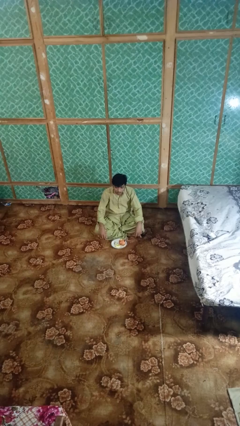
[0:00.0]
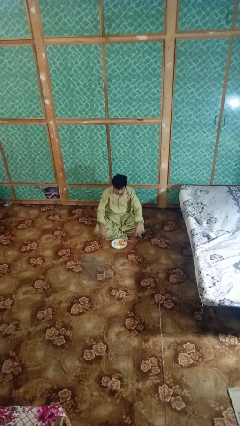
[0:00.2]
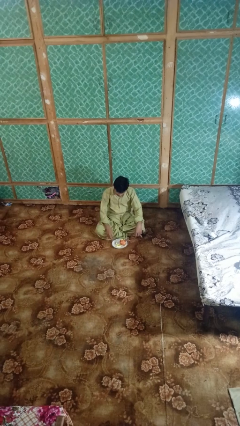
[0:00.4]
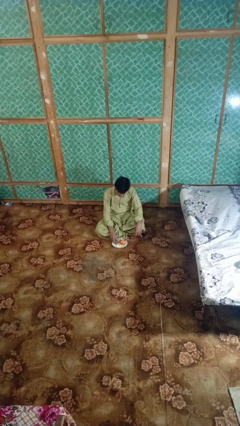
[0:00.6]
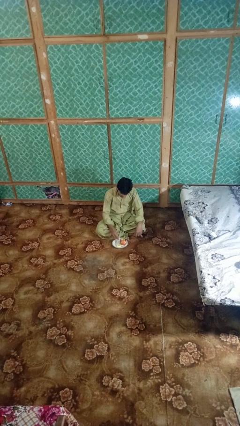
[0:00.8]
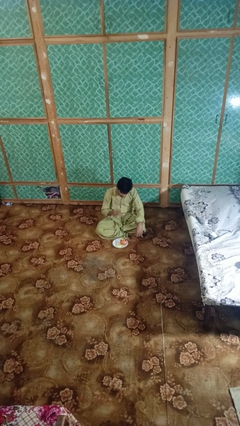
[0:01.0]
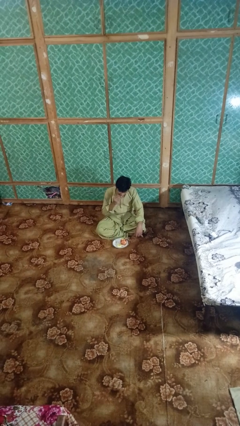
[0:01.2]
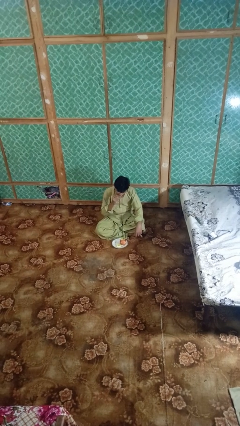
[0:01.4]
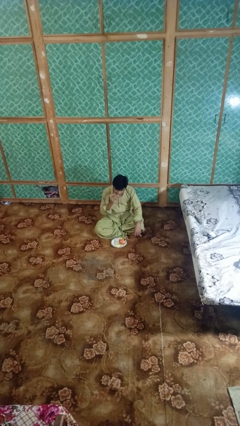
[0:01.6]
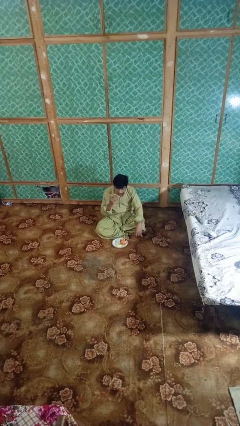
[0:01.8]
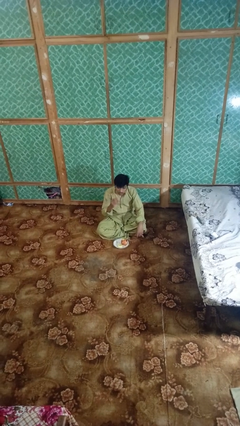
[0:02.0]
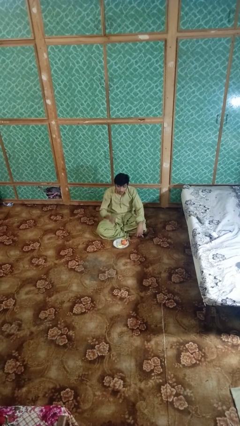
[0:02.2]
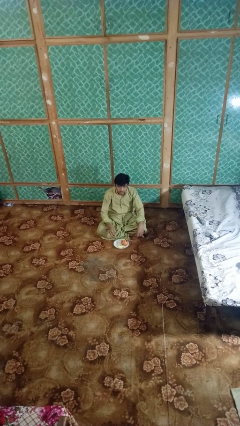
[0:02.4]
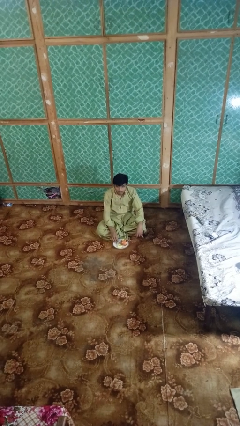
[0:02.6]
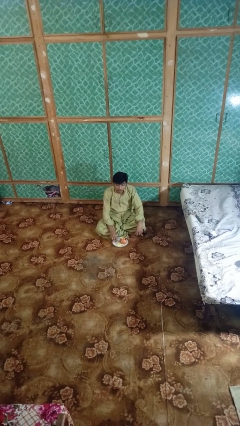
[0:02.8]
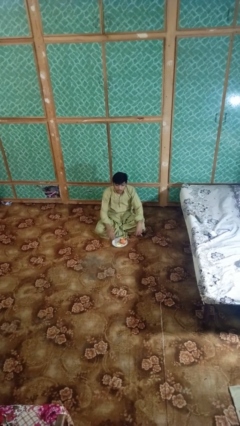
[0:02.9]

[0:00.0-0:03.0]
person eats apple

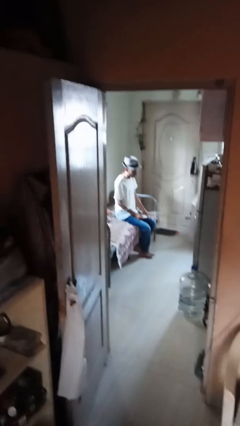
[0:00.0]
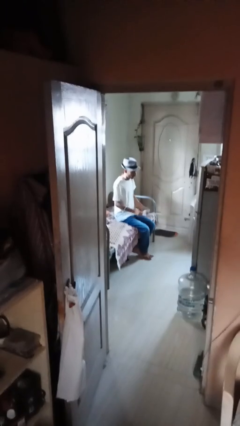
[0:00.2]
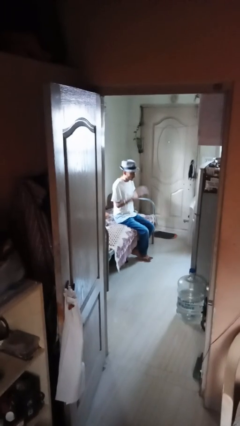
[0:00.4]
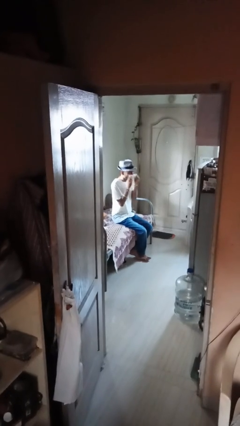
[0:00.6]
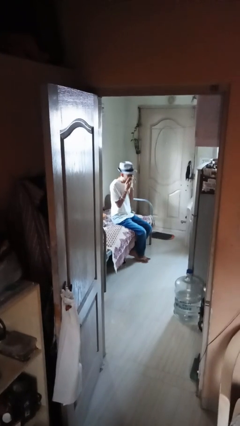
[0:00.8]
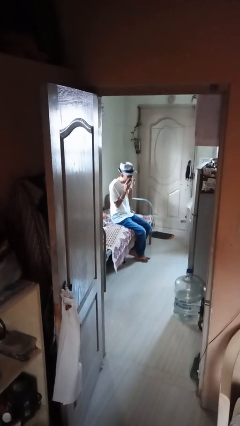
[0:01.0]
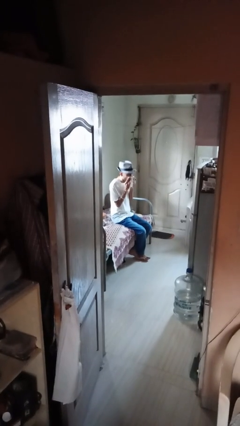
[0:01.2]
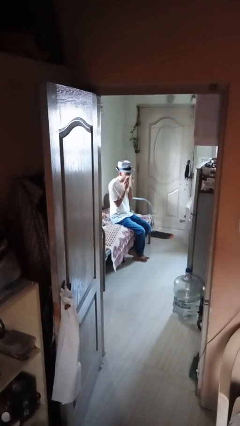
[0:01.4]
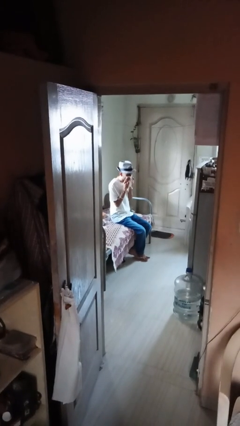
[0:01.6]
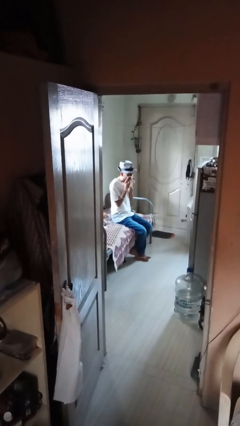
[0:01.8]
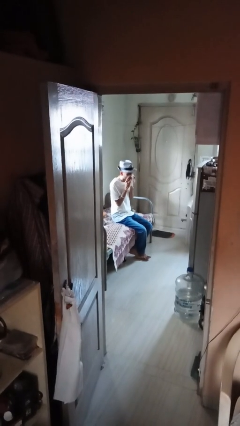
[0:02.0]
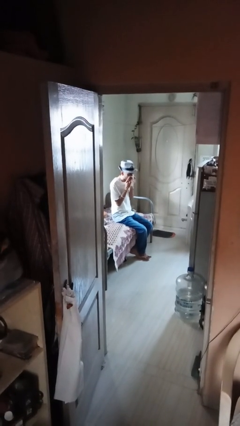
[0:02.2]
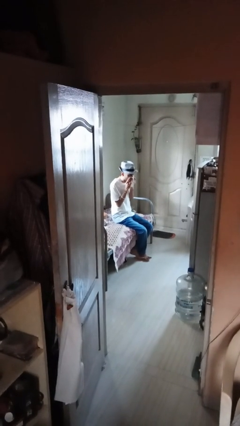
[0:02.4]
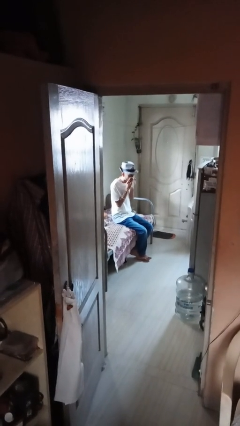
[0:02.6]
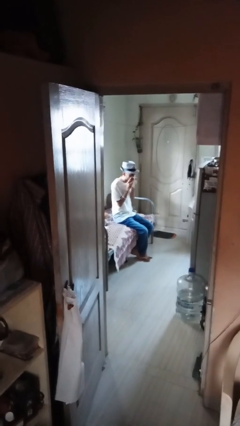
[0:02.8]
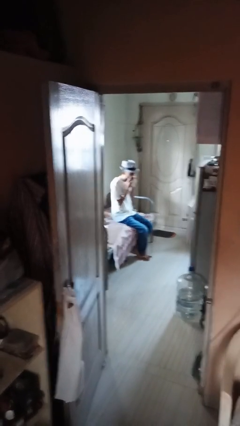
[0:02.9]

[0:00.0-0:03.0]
person blows nose

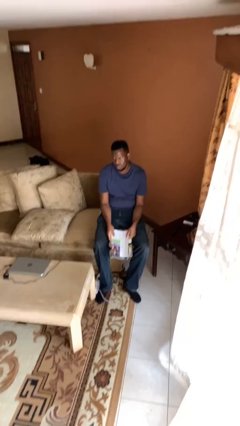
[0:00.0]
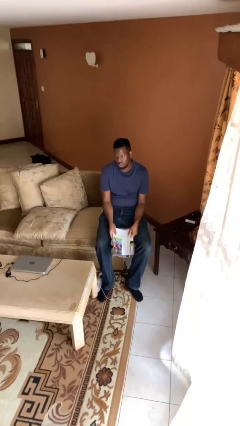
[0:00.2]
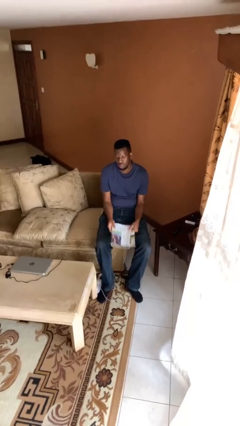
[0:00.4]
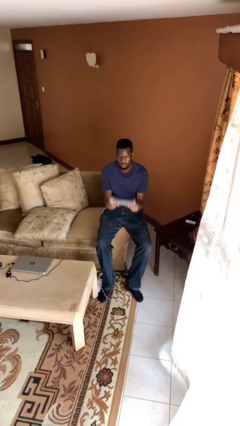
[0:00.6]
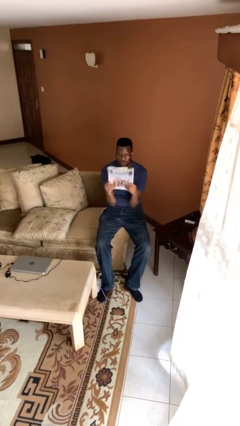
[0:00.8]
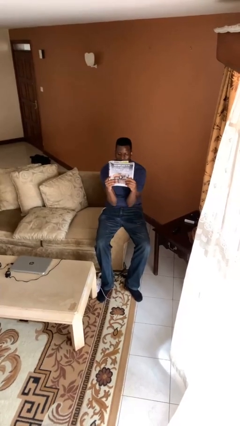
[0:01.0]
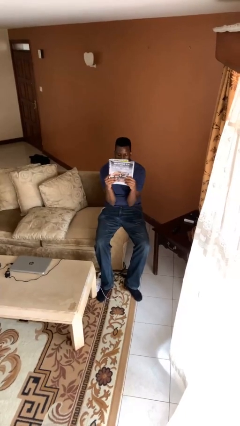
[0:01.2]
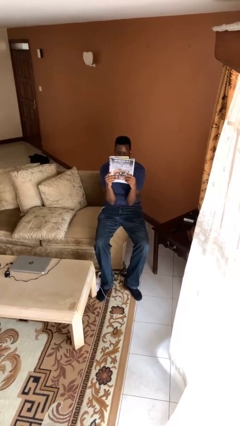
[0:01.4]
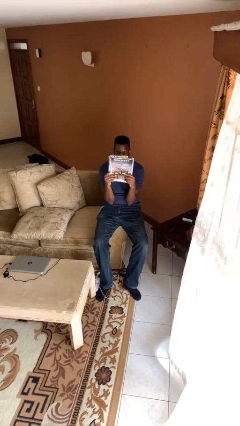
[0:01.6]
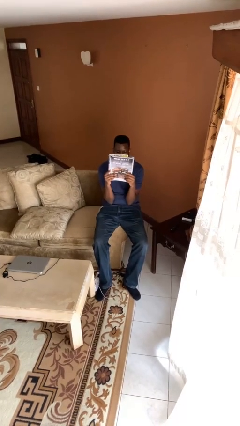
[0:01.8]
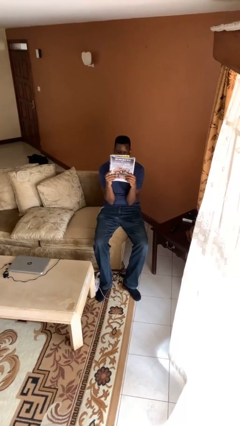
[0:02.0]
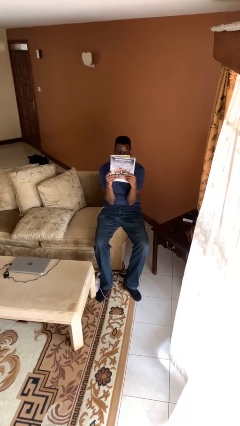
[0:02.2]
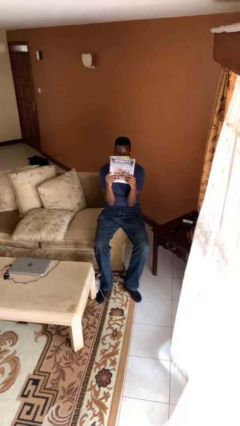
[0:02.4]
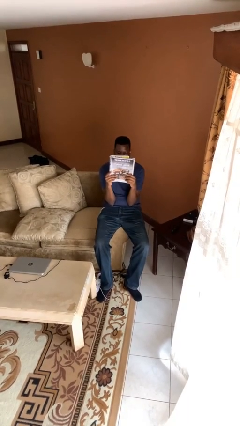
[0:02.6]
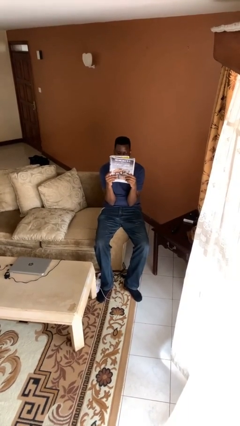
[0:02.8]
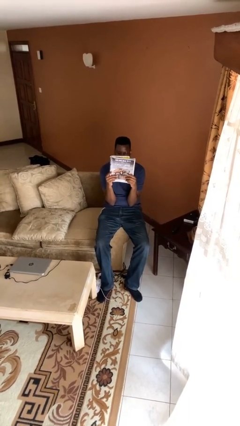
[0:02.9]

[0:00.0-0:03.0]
person reads document

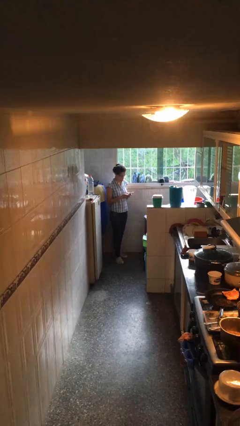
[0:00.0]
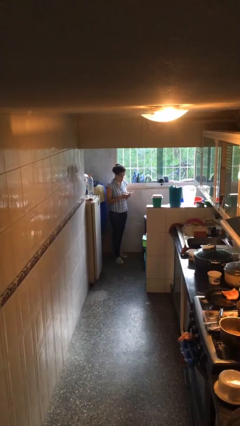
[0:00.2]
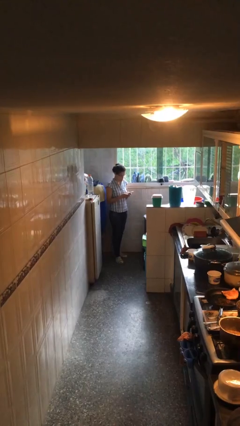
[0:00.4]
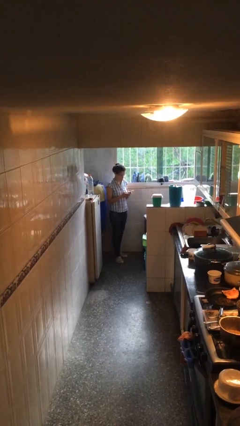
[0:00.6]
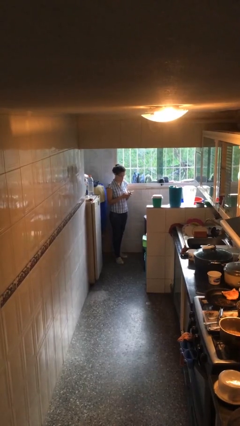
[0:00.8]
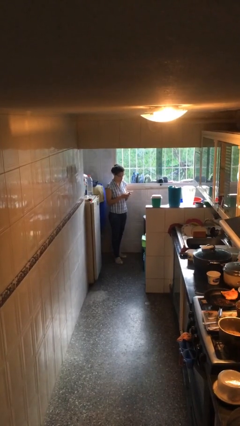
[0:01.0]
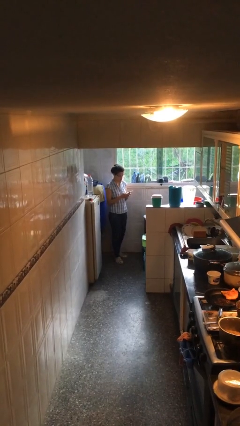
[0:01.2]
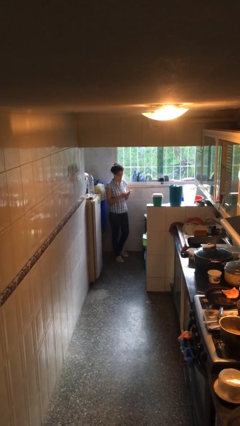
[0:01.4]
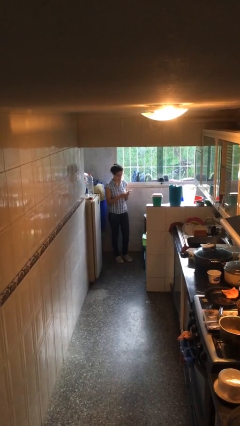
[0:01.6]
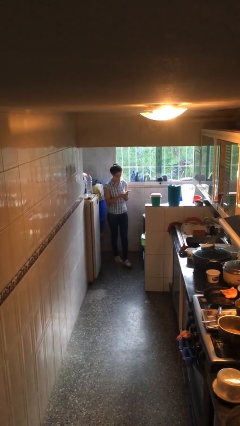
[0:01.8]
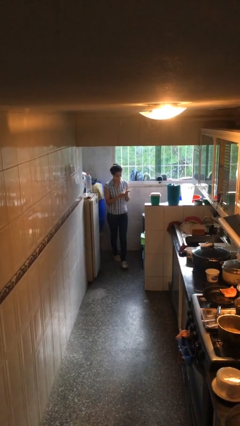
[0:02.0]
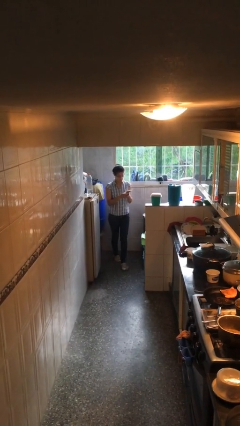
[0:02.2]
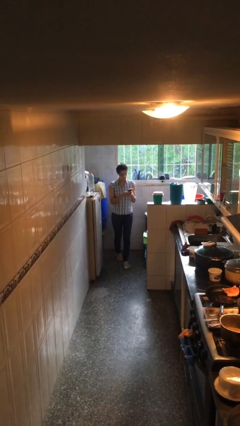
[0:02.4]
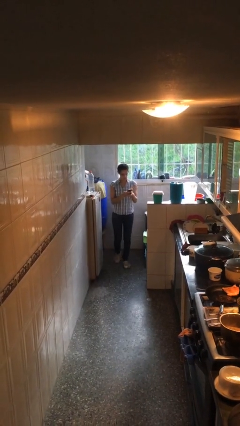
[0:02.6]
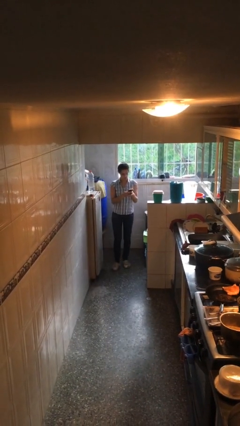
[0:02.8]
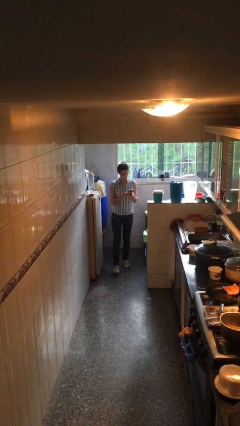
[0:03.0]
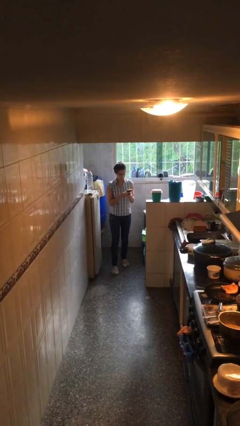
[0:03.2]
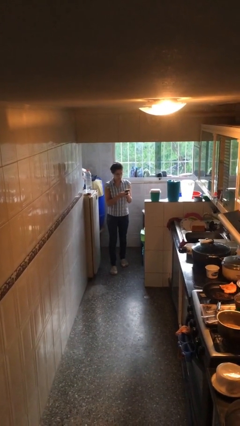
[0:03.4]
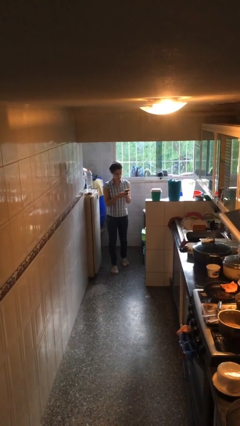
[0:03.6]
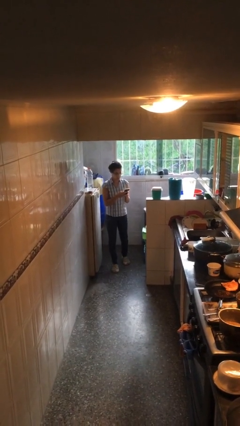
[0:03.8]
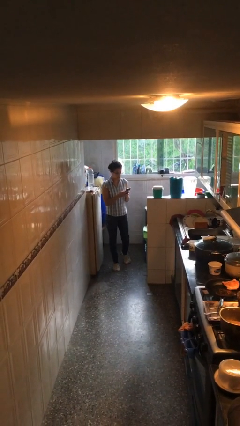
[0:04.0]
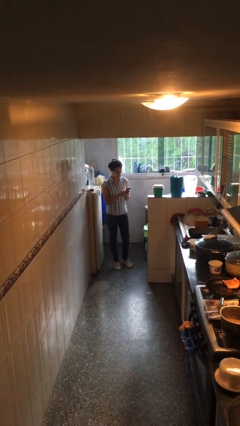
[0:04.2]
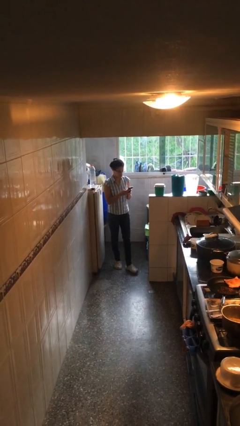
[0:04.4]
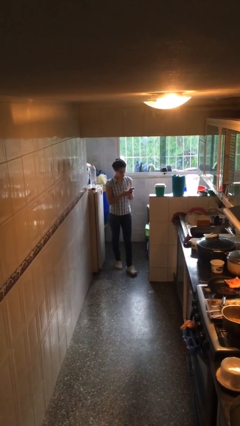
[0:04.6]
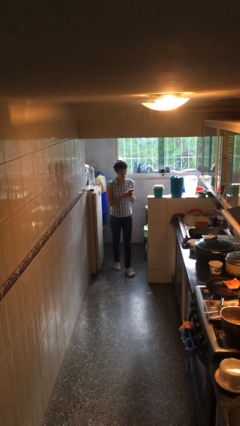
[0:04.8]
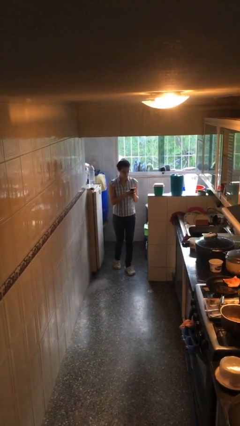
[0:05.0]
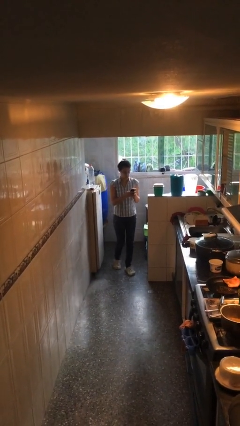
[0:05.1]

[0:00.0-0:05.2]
person texts on phone

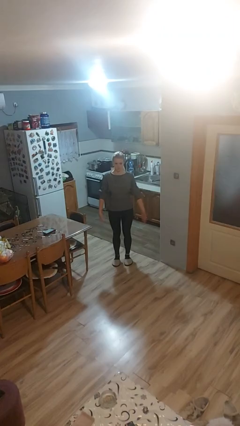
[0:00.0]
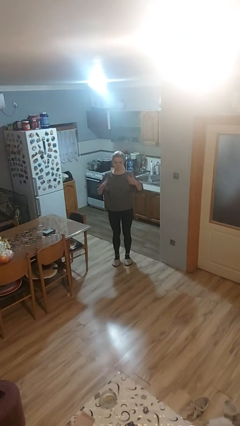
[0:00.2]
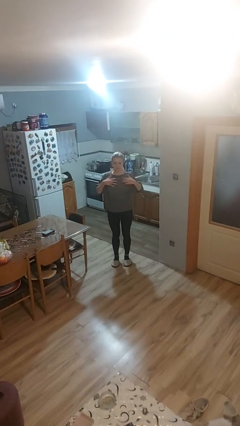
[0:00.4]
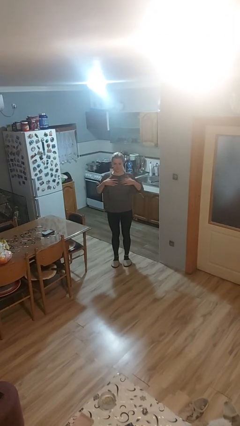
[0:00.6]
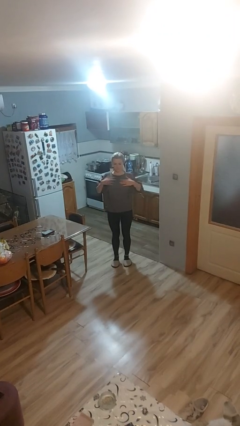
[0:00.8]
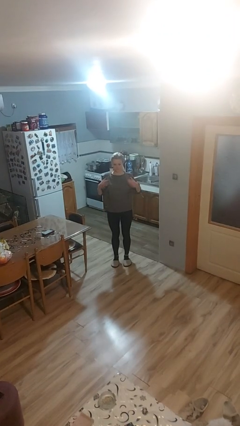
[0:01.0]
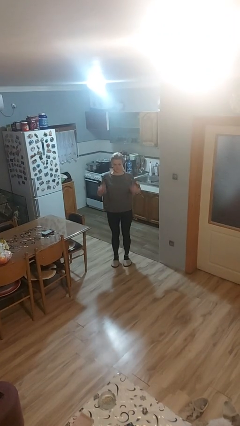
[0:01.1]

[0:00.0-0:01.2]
person drums on chest

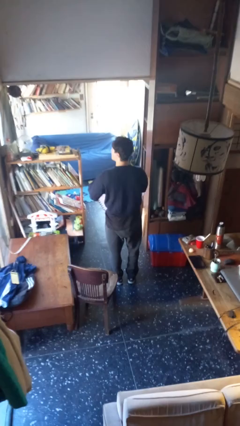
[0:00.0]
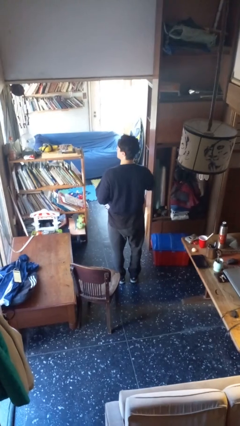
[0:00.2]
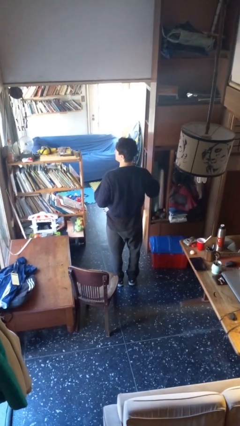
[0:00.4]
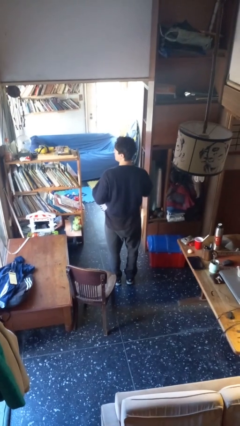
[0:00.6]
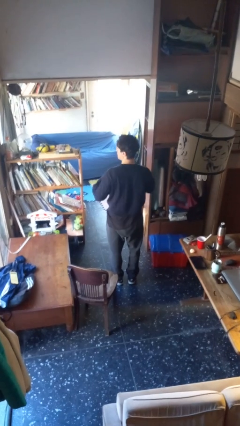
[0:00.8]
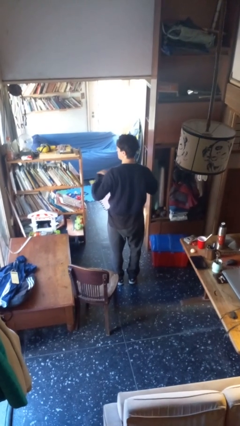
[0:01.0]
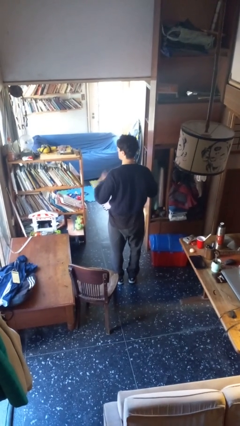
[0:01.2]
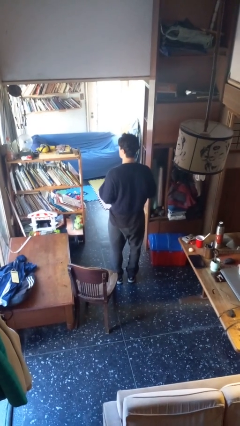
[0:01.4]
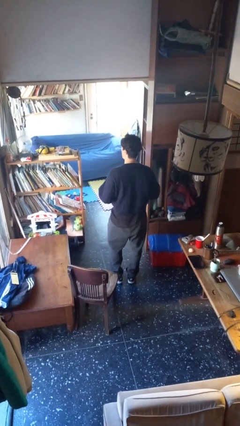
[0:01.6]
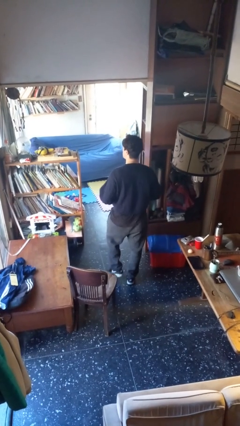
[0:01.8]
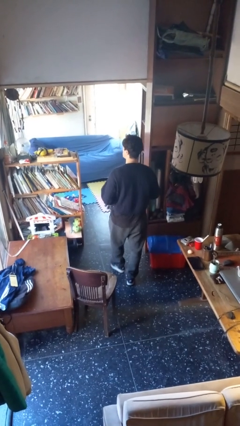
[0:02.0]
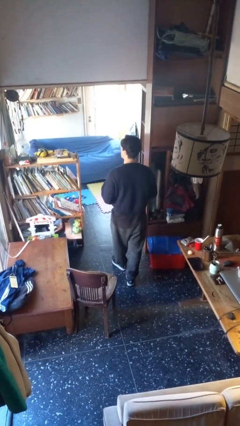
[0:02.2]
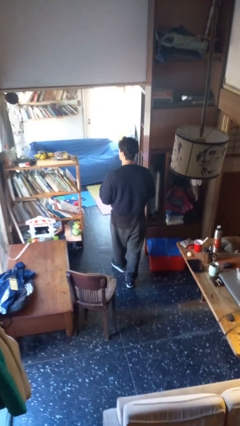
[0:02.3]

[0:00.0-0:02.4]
person takes off gloves
